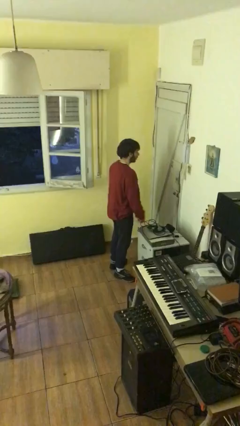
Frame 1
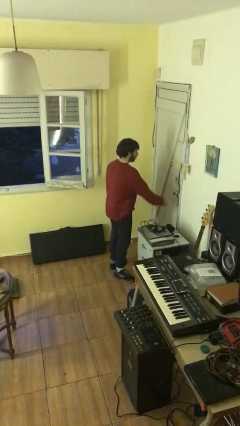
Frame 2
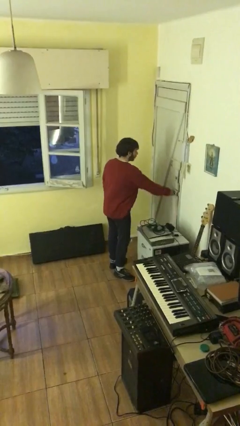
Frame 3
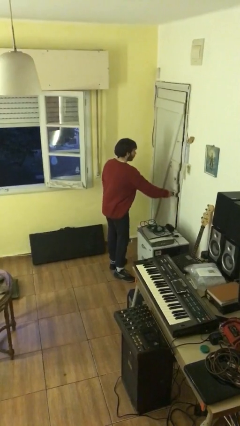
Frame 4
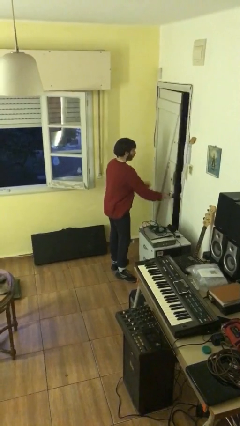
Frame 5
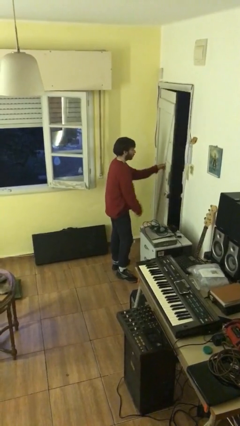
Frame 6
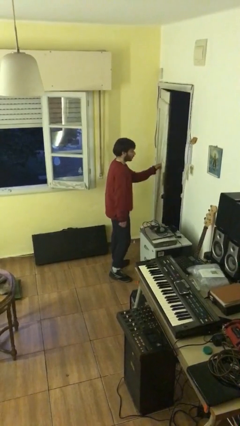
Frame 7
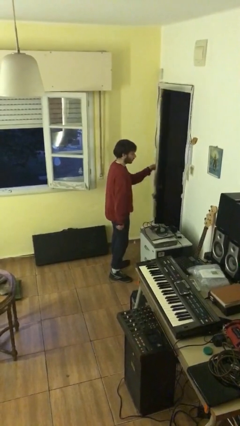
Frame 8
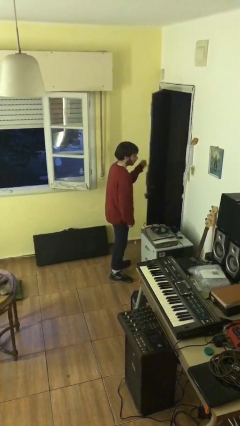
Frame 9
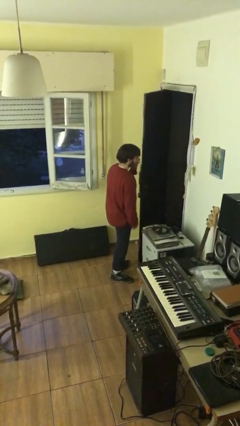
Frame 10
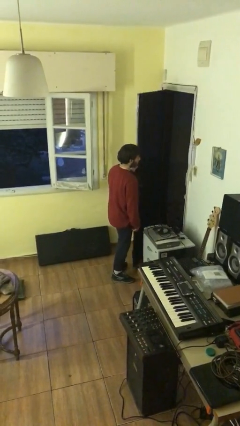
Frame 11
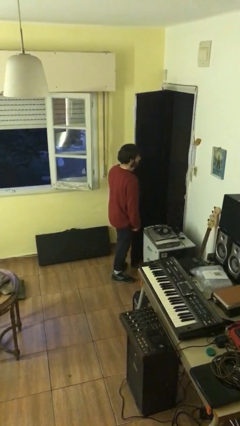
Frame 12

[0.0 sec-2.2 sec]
person opens facility door

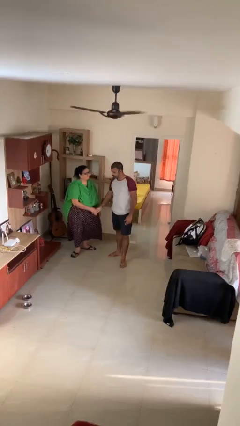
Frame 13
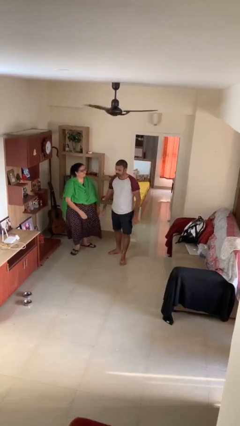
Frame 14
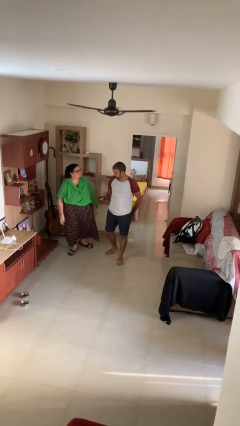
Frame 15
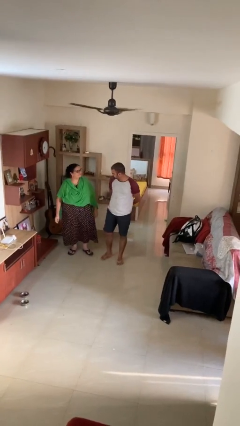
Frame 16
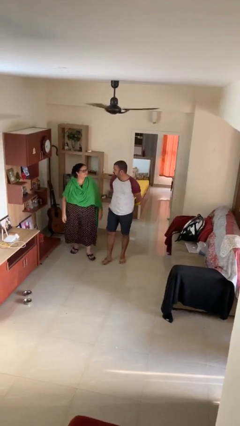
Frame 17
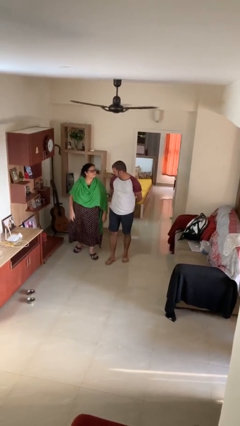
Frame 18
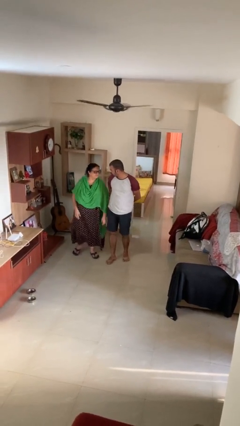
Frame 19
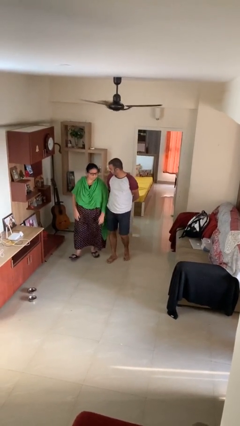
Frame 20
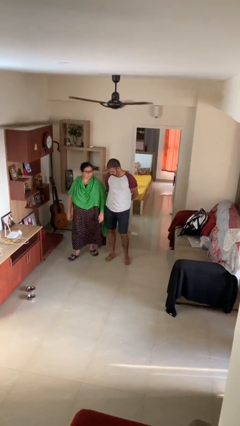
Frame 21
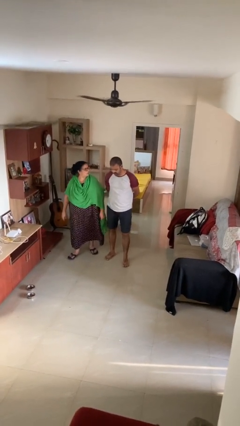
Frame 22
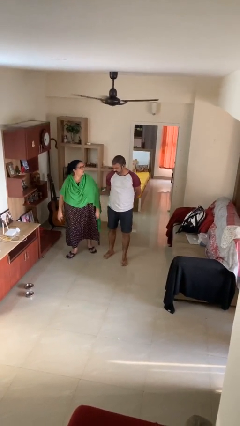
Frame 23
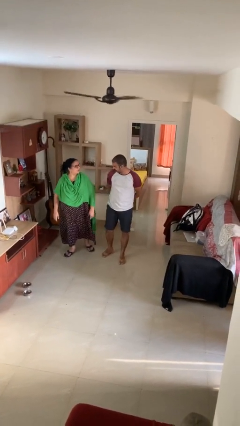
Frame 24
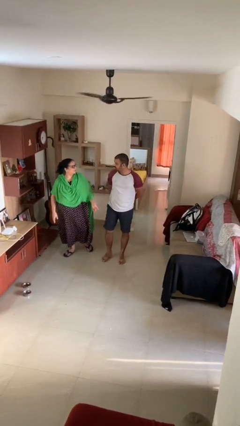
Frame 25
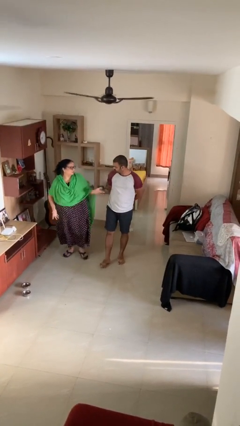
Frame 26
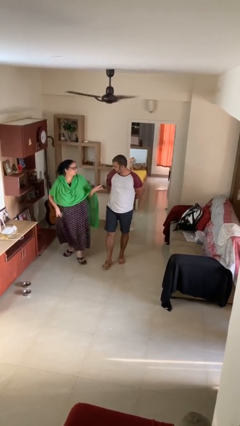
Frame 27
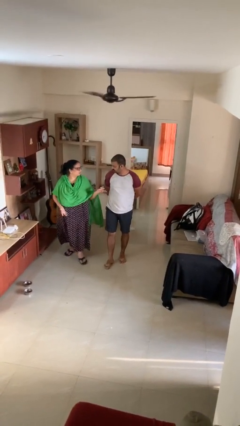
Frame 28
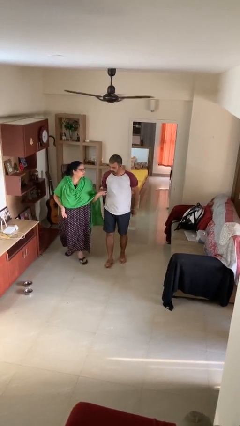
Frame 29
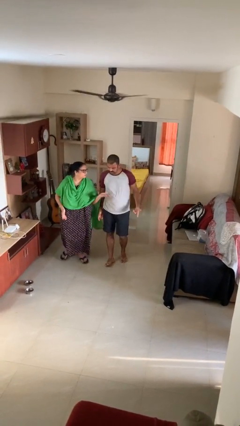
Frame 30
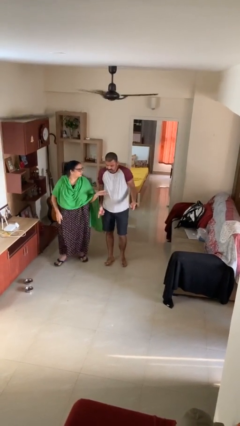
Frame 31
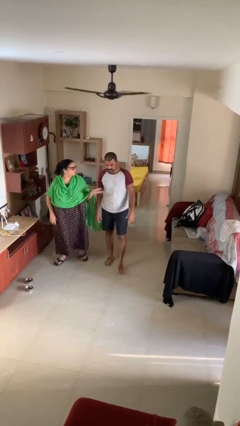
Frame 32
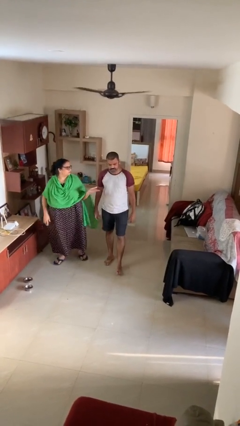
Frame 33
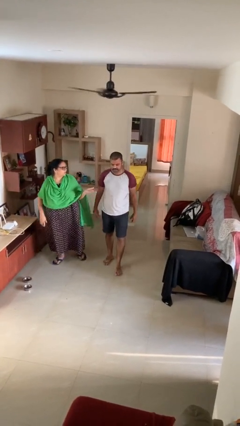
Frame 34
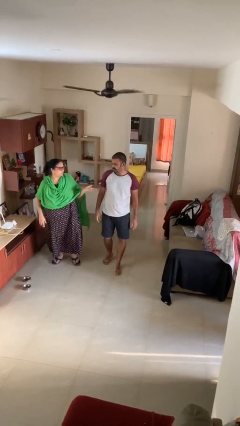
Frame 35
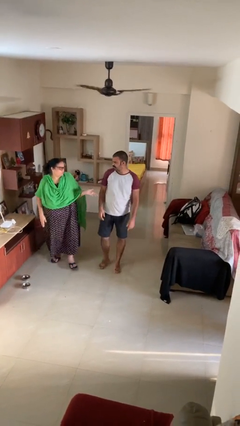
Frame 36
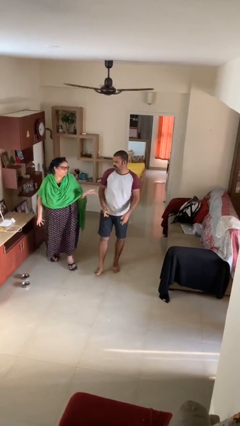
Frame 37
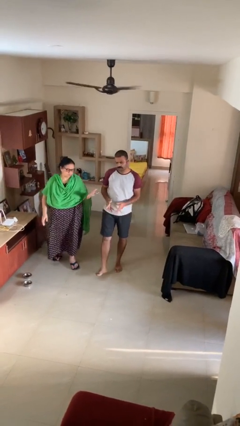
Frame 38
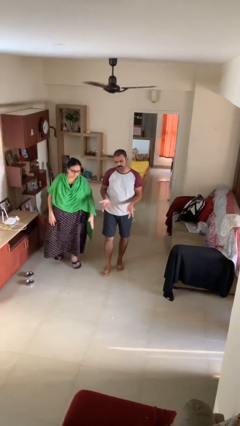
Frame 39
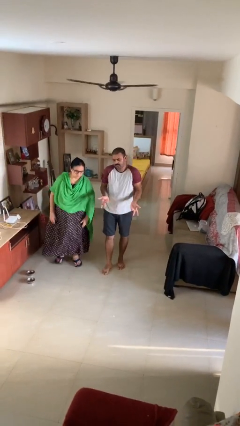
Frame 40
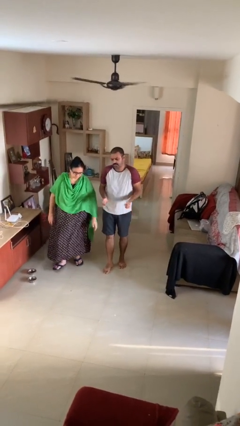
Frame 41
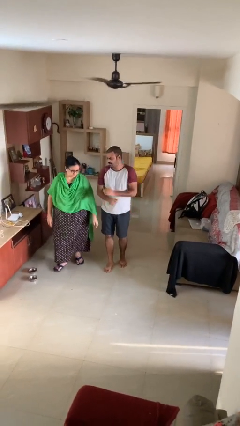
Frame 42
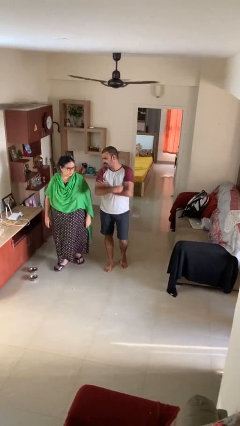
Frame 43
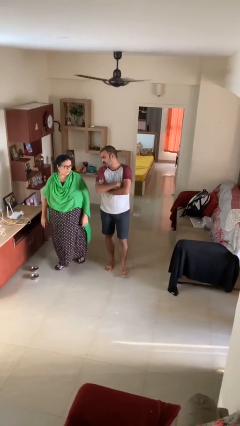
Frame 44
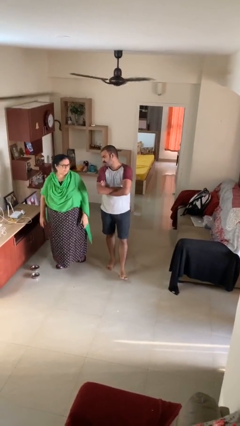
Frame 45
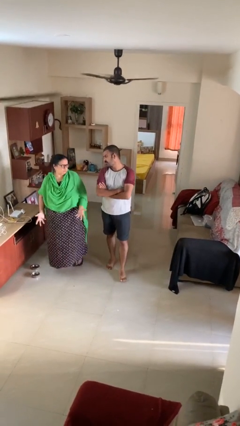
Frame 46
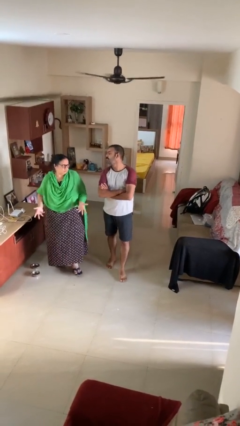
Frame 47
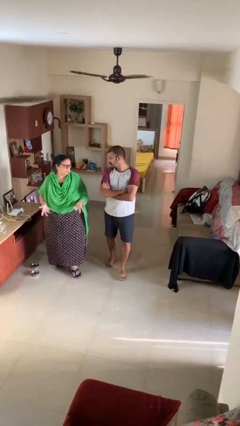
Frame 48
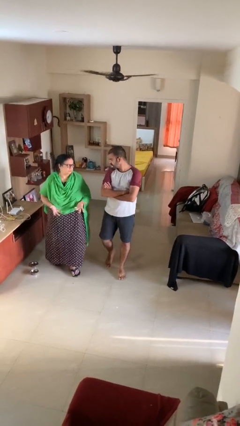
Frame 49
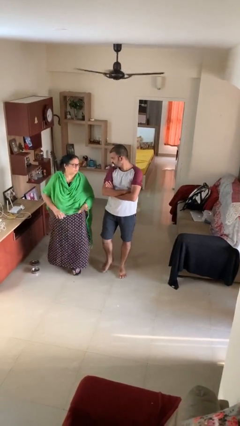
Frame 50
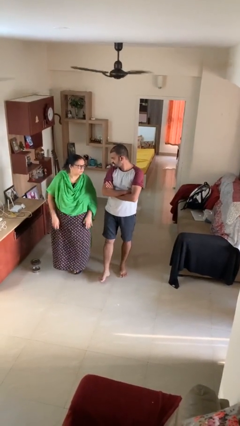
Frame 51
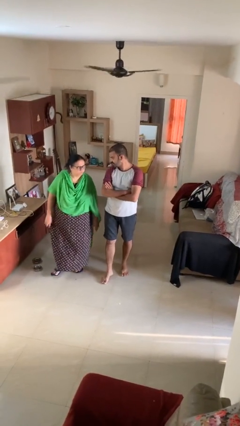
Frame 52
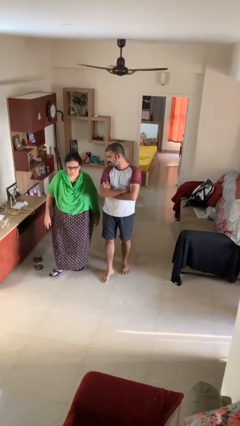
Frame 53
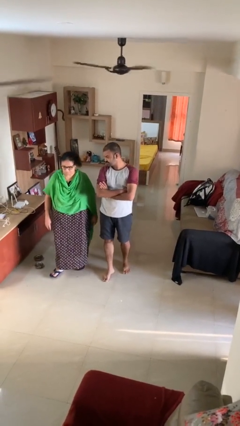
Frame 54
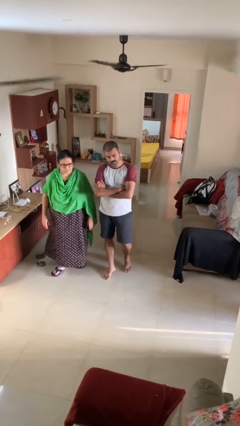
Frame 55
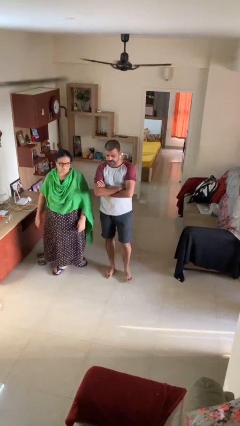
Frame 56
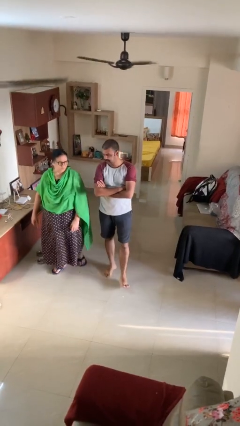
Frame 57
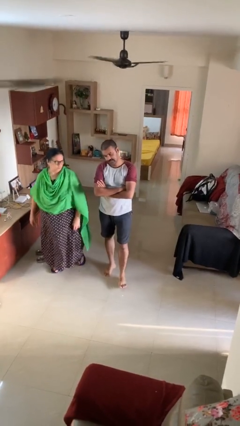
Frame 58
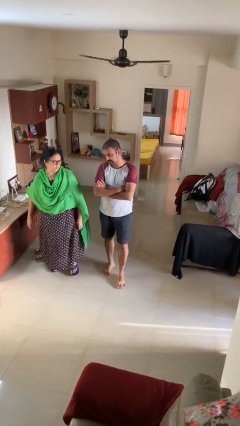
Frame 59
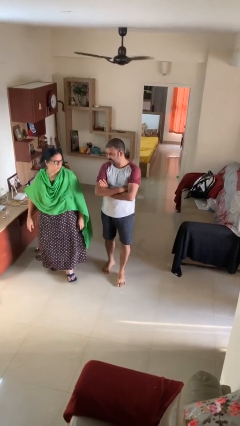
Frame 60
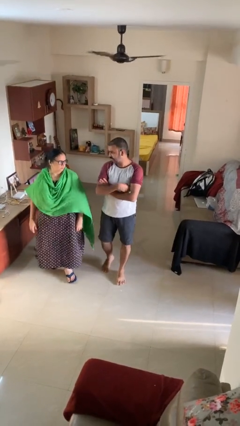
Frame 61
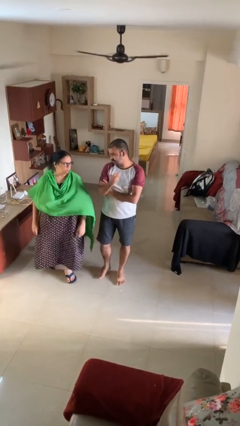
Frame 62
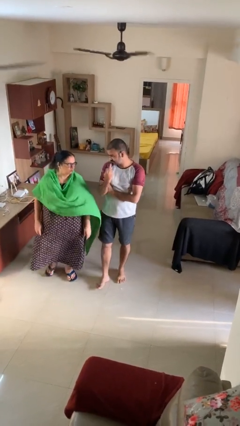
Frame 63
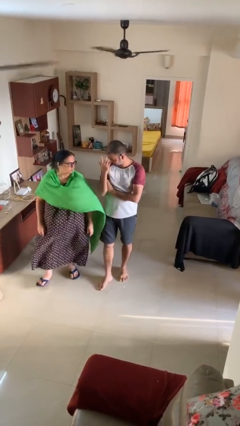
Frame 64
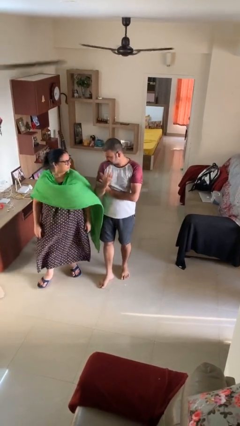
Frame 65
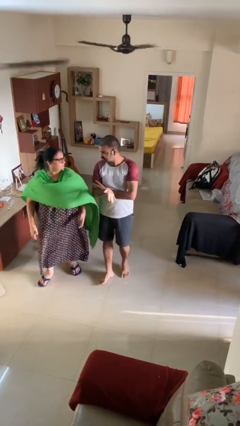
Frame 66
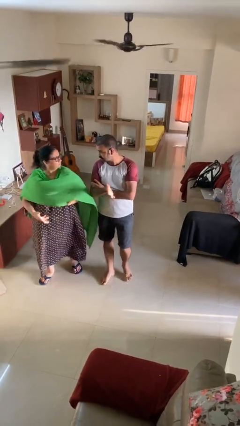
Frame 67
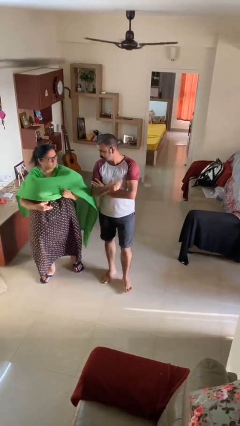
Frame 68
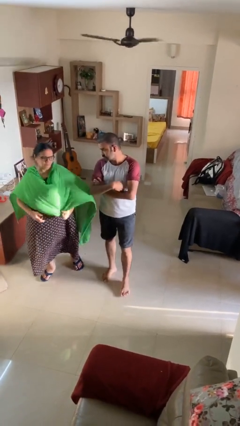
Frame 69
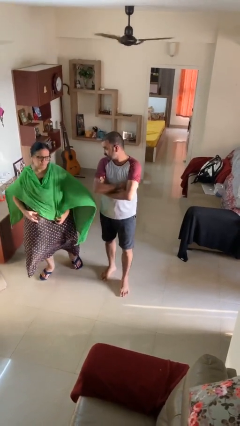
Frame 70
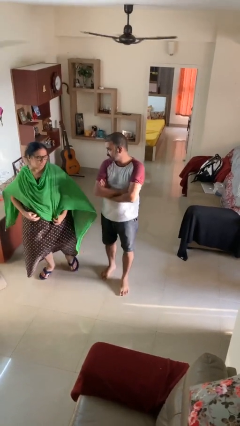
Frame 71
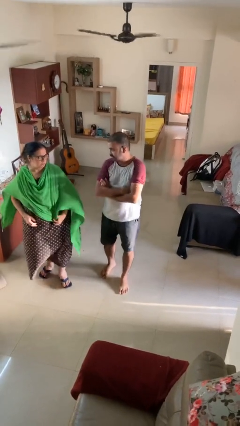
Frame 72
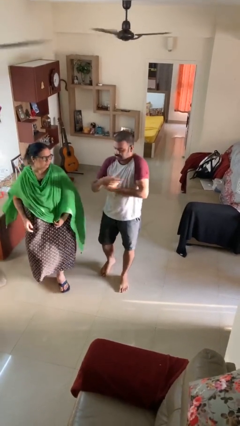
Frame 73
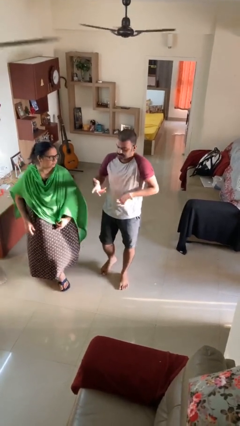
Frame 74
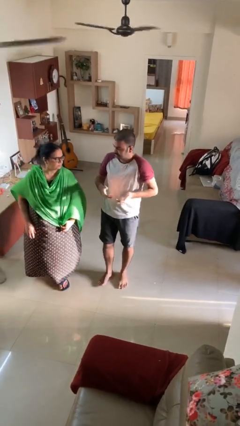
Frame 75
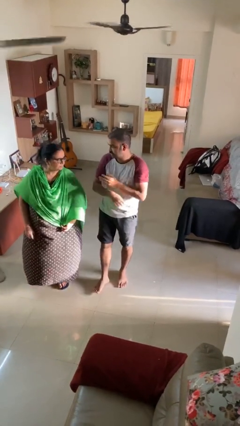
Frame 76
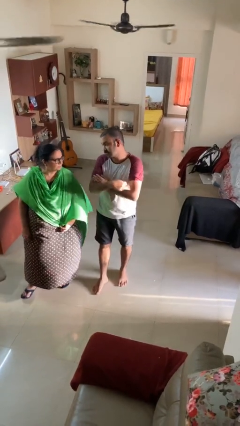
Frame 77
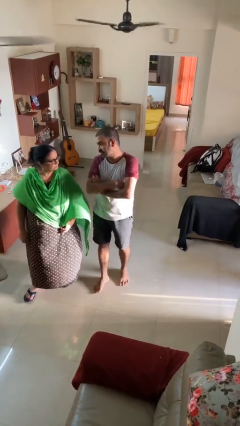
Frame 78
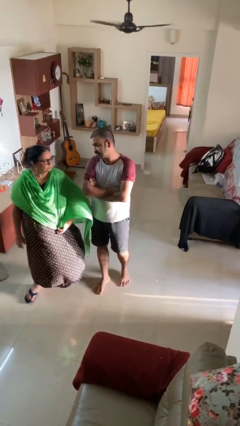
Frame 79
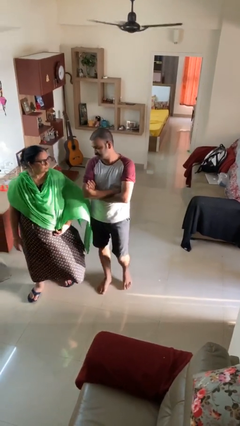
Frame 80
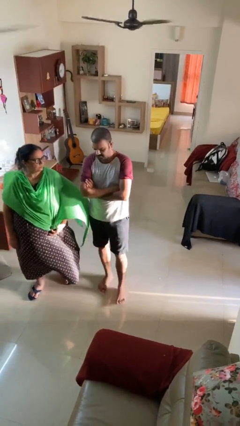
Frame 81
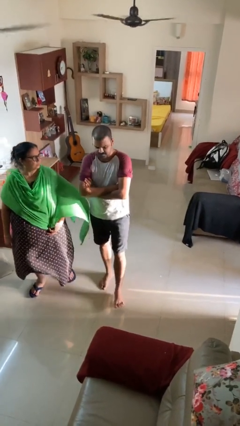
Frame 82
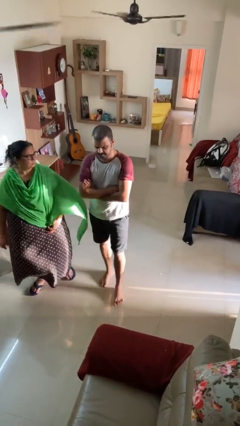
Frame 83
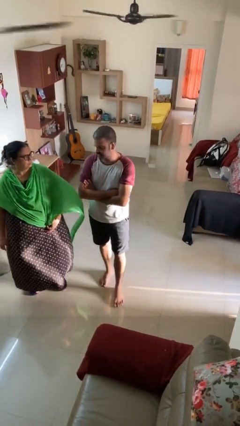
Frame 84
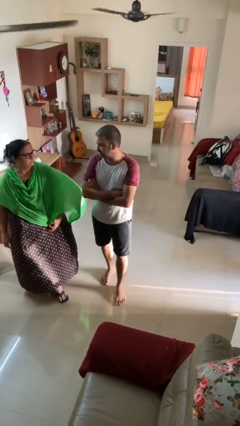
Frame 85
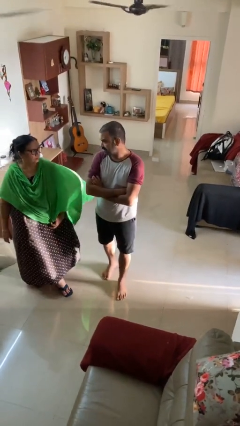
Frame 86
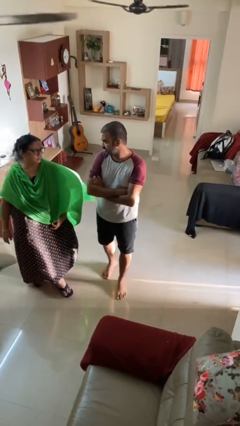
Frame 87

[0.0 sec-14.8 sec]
person talks to person

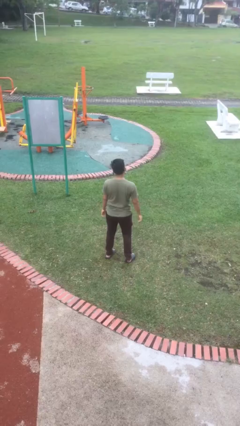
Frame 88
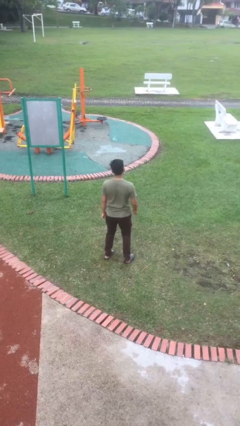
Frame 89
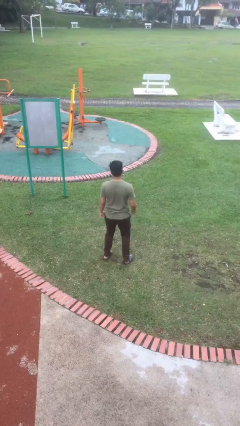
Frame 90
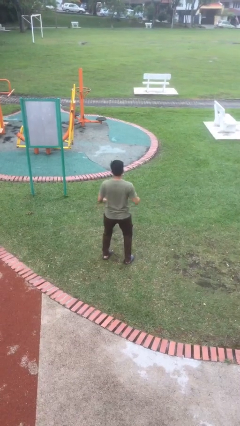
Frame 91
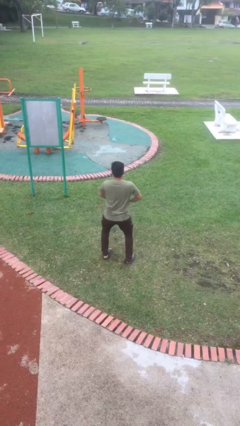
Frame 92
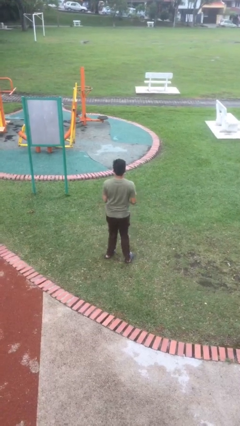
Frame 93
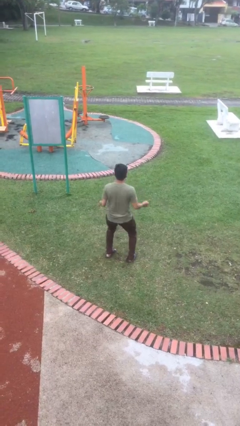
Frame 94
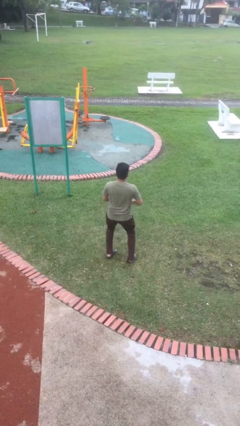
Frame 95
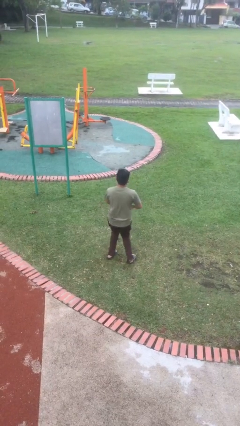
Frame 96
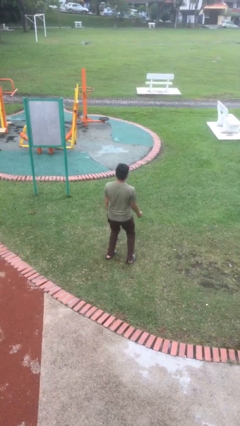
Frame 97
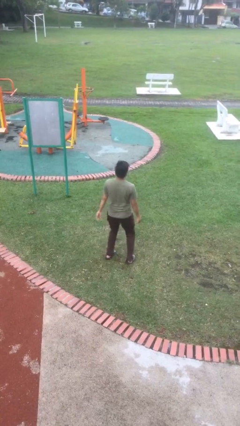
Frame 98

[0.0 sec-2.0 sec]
person dances in place
